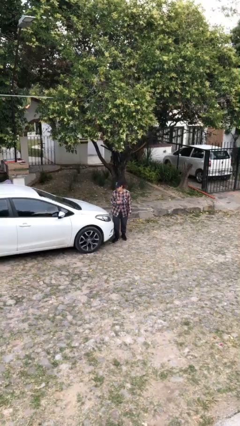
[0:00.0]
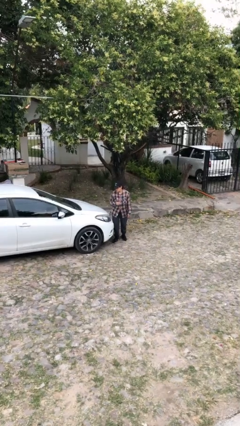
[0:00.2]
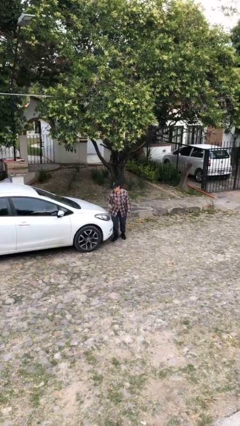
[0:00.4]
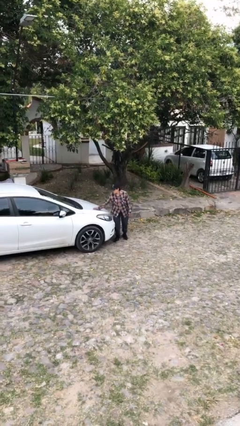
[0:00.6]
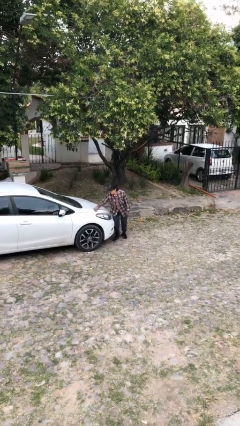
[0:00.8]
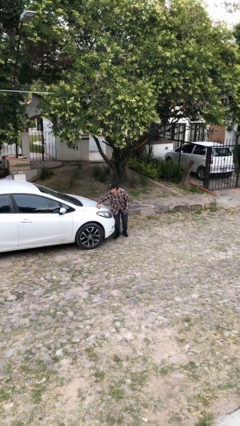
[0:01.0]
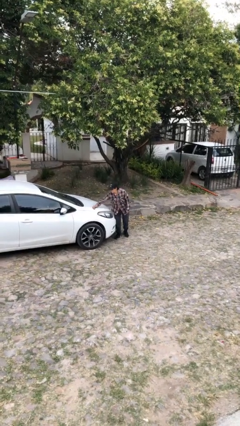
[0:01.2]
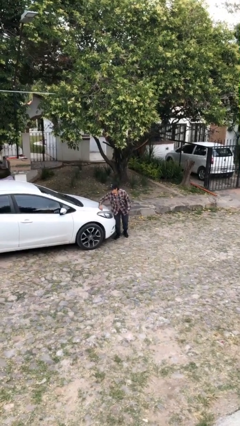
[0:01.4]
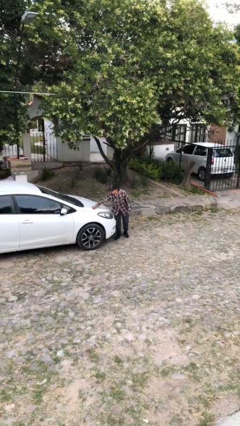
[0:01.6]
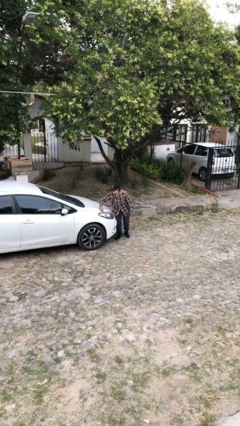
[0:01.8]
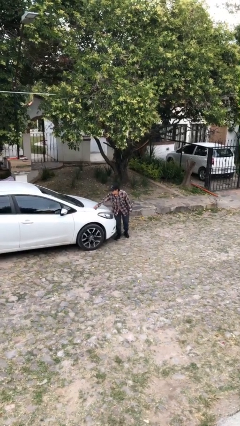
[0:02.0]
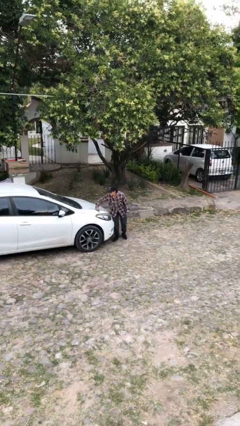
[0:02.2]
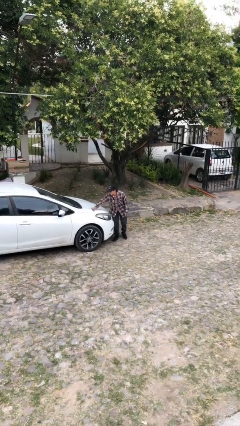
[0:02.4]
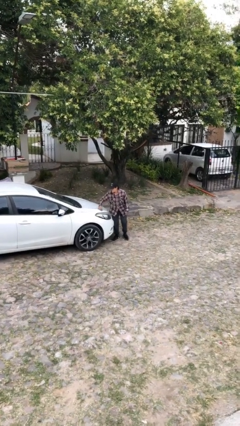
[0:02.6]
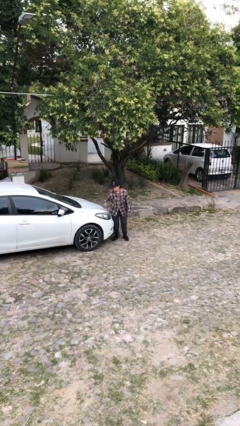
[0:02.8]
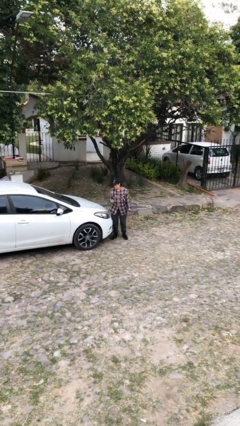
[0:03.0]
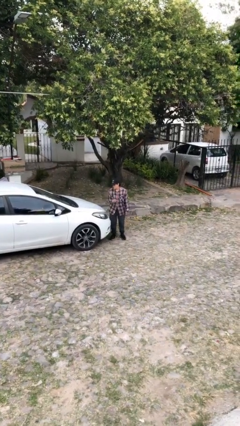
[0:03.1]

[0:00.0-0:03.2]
person polishes car with rag

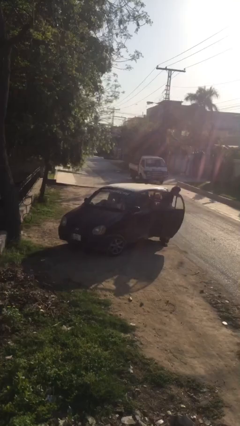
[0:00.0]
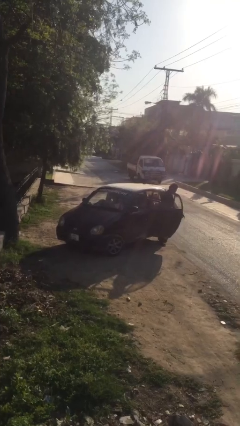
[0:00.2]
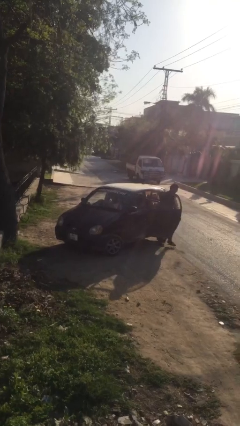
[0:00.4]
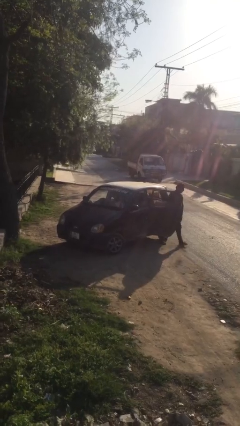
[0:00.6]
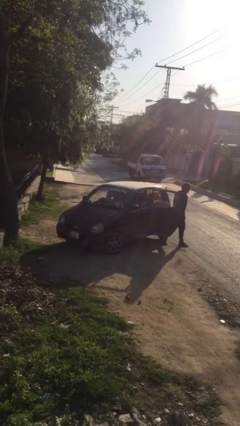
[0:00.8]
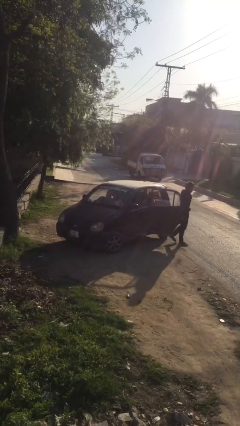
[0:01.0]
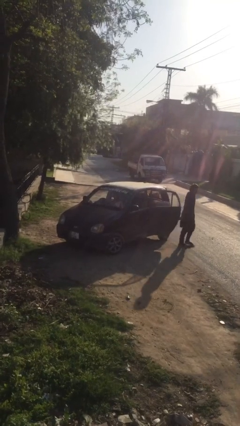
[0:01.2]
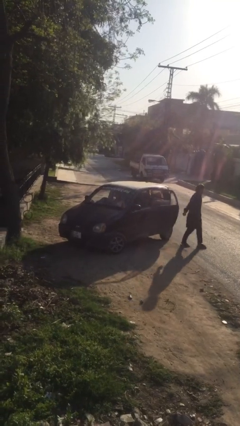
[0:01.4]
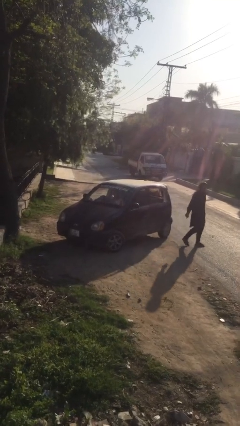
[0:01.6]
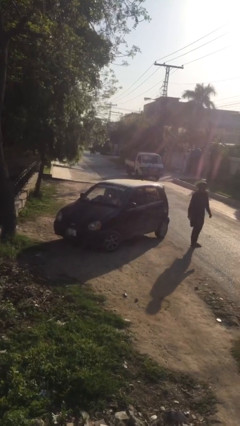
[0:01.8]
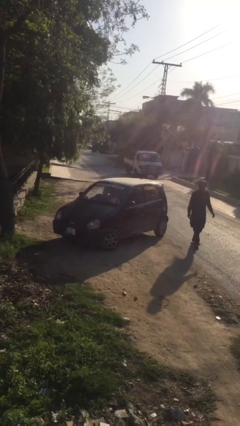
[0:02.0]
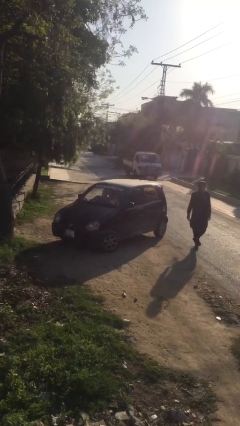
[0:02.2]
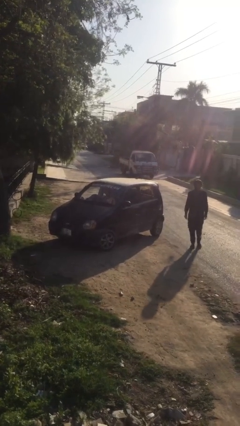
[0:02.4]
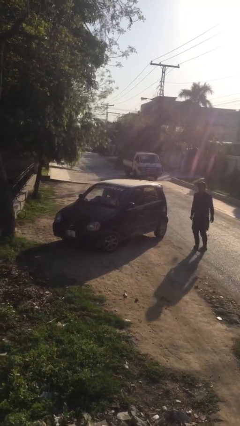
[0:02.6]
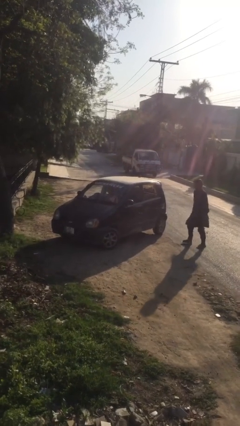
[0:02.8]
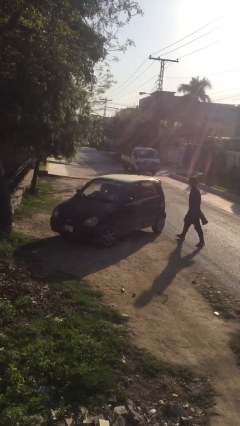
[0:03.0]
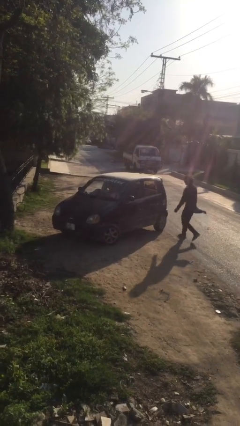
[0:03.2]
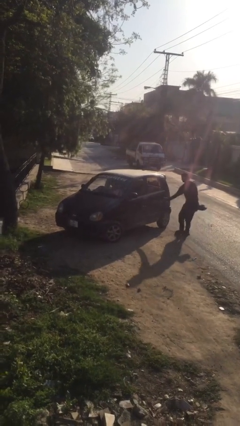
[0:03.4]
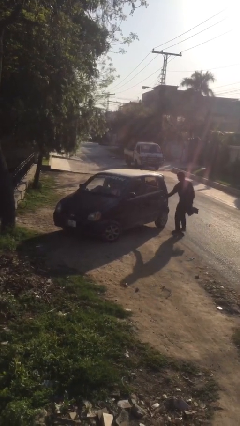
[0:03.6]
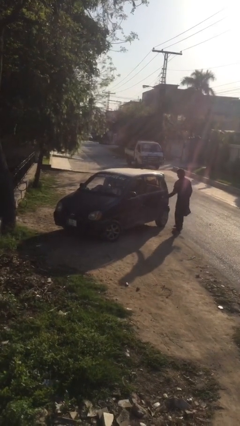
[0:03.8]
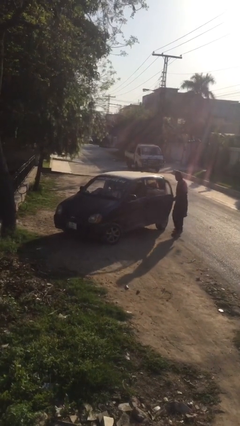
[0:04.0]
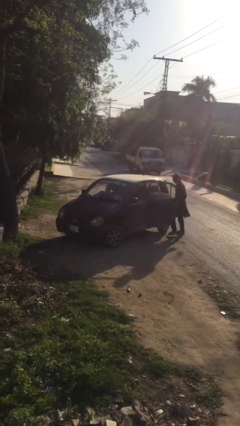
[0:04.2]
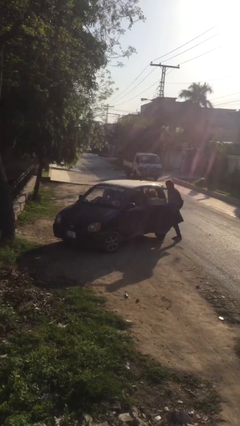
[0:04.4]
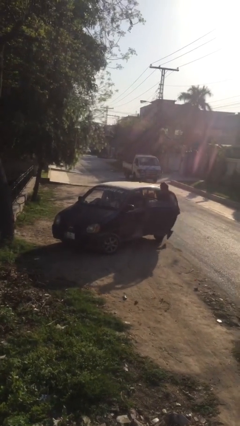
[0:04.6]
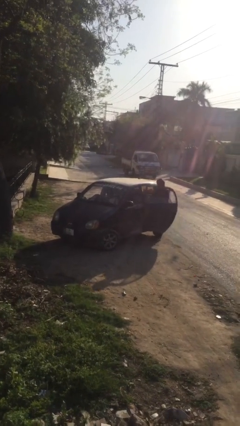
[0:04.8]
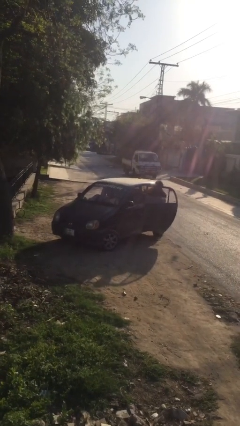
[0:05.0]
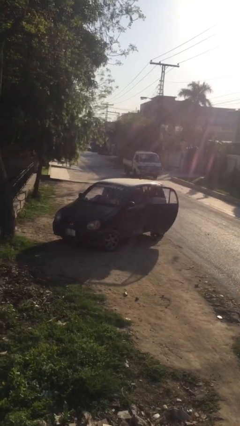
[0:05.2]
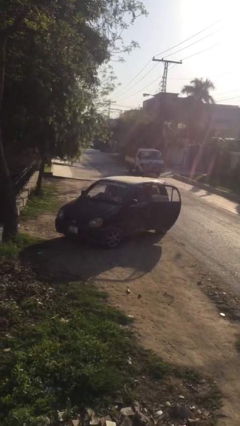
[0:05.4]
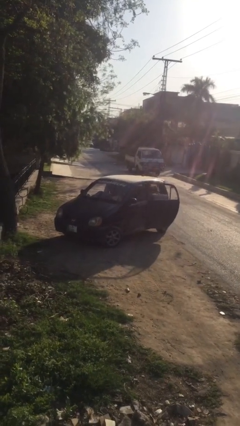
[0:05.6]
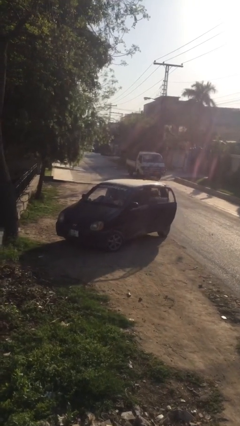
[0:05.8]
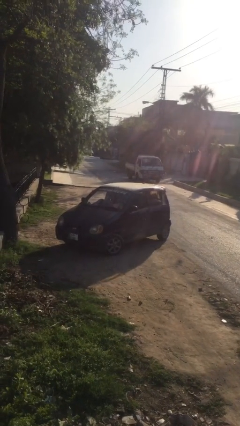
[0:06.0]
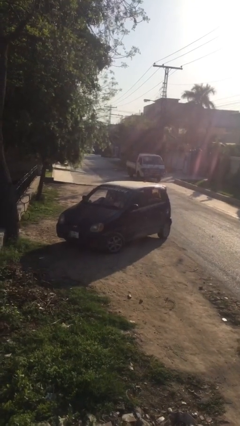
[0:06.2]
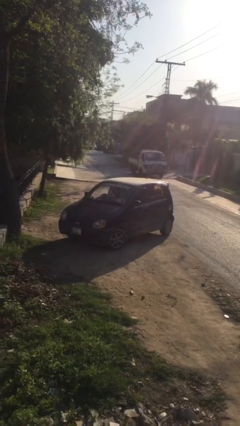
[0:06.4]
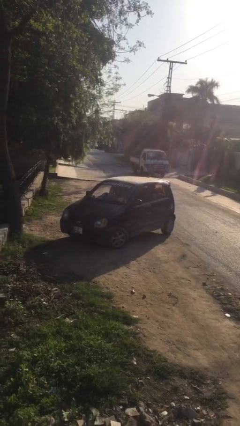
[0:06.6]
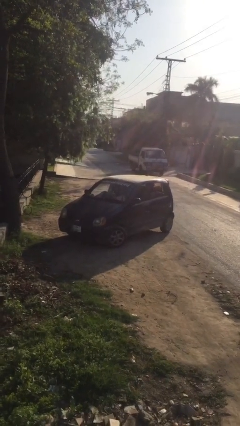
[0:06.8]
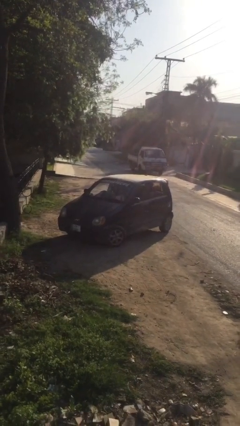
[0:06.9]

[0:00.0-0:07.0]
car picks up person

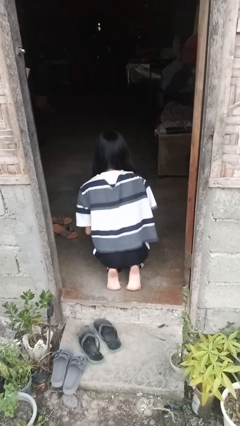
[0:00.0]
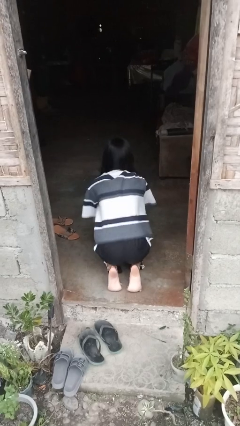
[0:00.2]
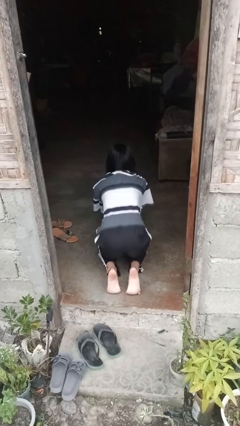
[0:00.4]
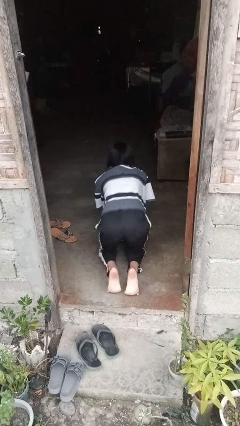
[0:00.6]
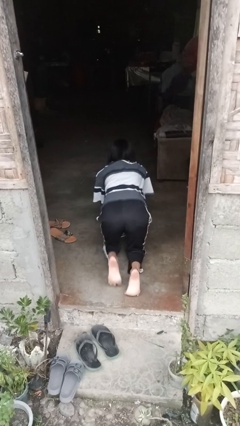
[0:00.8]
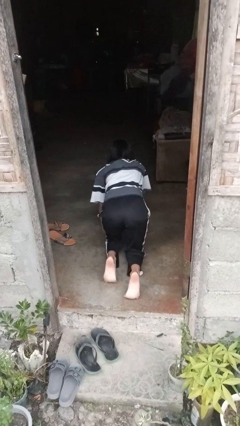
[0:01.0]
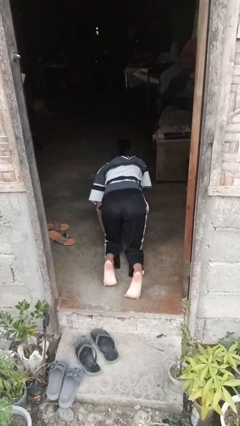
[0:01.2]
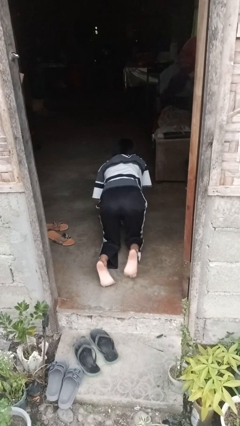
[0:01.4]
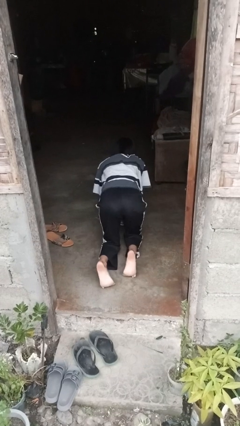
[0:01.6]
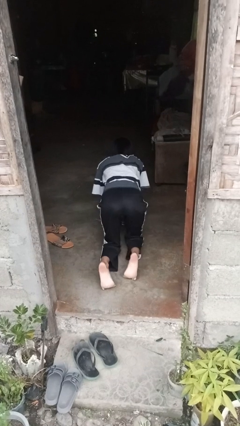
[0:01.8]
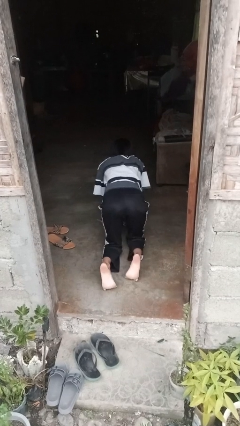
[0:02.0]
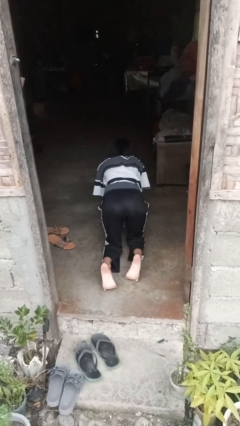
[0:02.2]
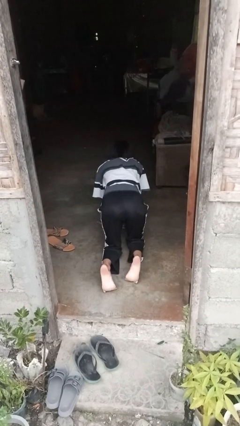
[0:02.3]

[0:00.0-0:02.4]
person crawls

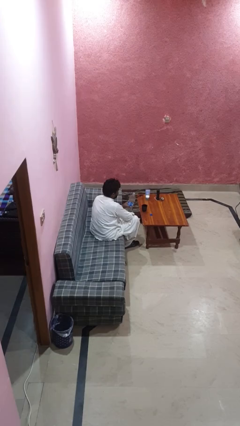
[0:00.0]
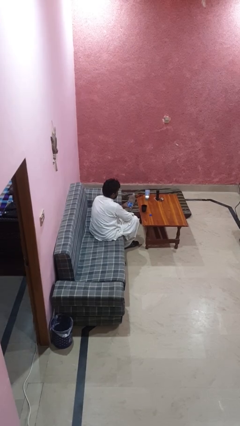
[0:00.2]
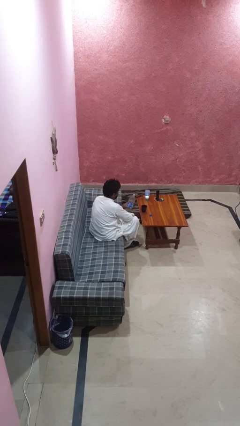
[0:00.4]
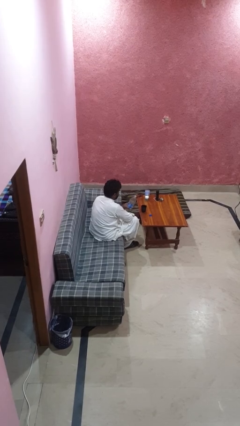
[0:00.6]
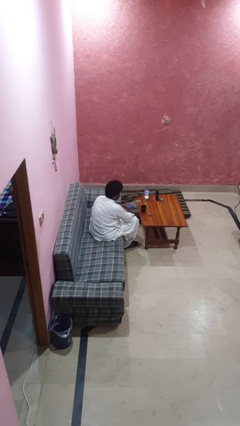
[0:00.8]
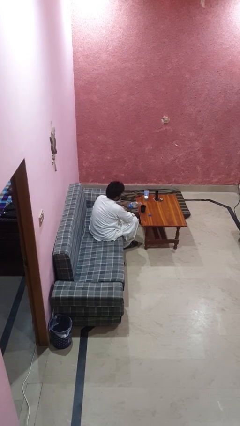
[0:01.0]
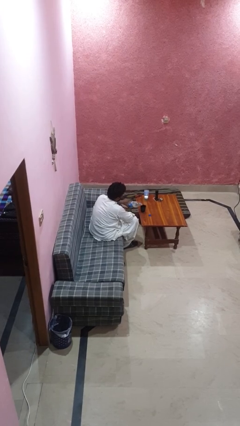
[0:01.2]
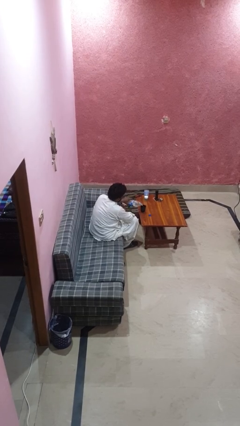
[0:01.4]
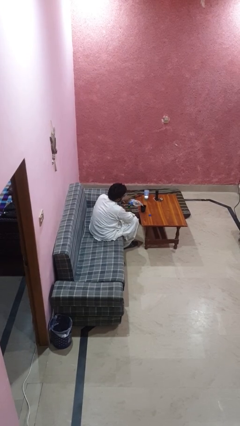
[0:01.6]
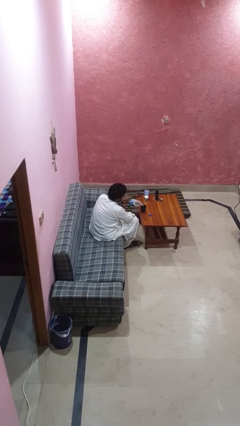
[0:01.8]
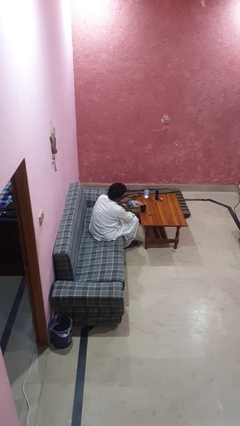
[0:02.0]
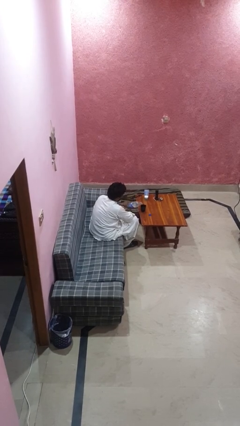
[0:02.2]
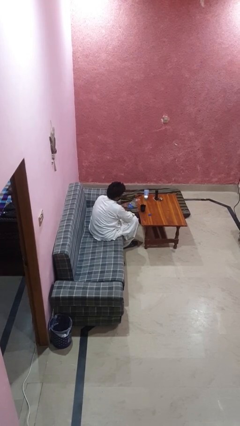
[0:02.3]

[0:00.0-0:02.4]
person pours liquid into cup

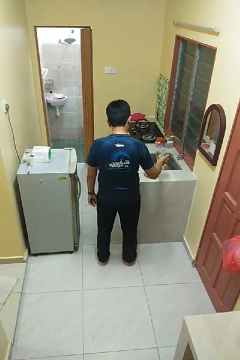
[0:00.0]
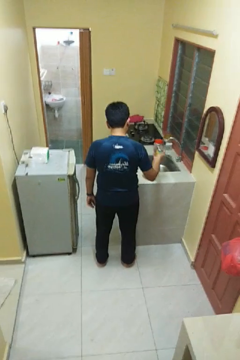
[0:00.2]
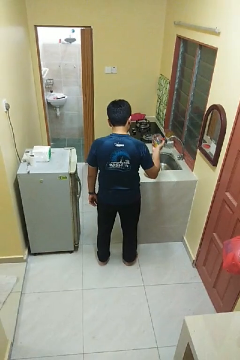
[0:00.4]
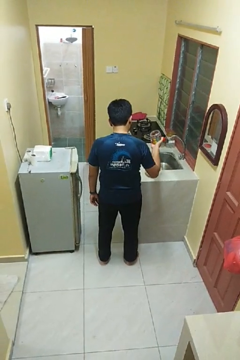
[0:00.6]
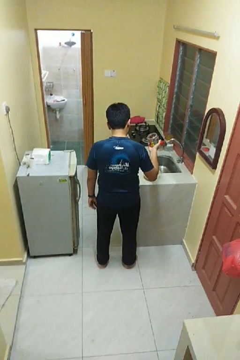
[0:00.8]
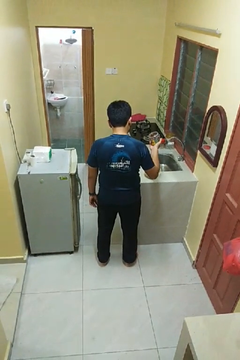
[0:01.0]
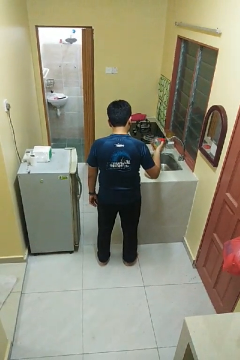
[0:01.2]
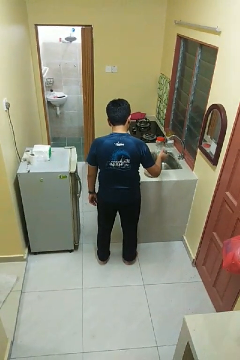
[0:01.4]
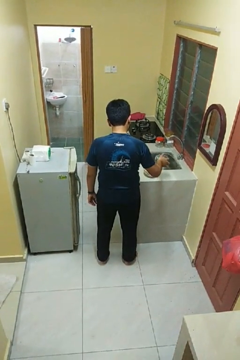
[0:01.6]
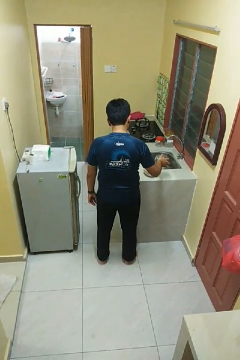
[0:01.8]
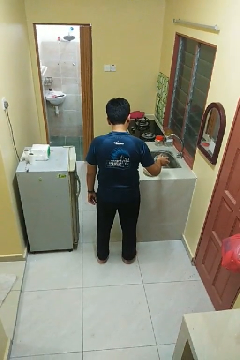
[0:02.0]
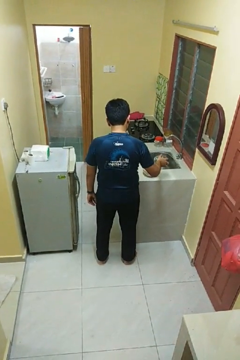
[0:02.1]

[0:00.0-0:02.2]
person pours into bowl

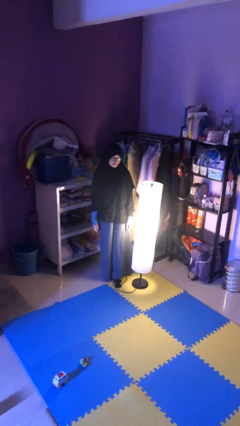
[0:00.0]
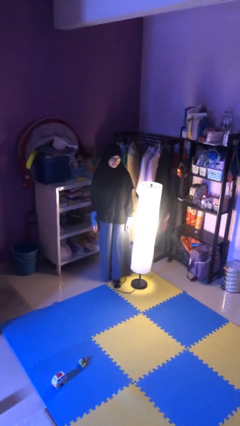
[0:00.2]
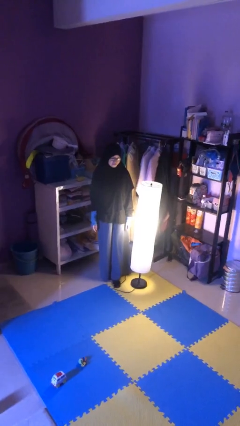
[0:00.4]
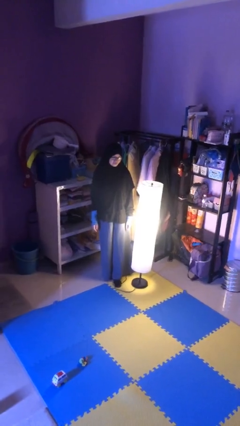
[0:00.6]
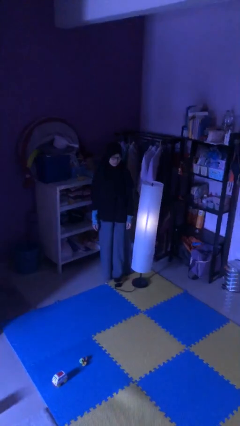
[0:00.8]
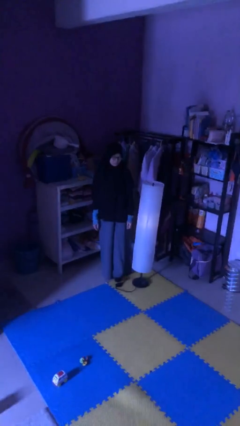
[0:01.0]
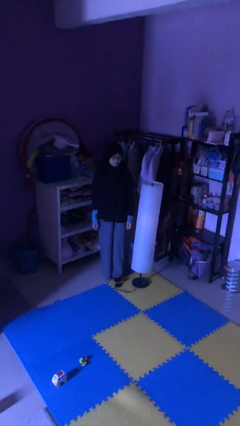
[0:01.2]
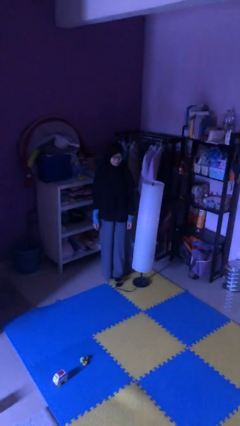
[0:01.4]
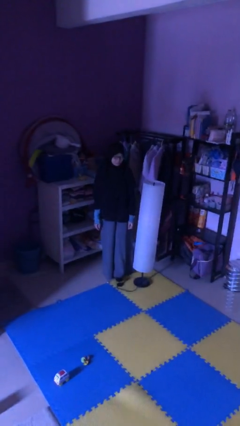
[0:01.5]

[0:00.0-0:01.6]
person turns off lamp
